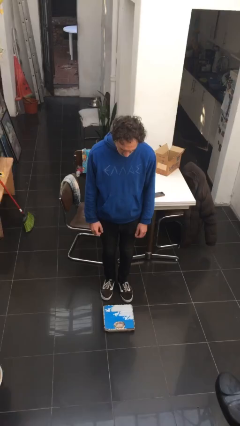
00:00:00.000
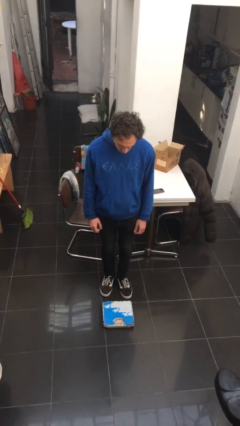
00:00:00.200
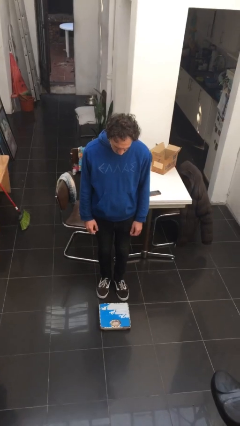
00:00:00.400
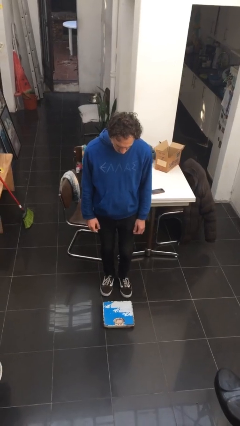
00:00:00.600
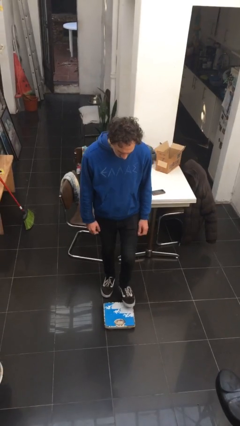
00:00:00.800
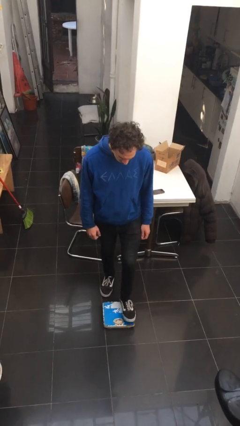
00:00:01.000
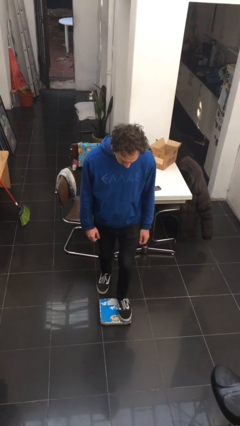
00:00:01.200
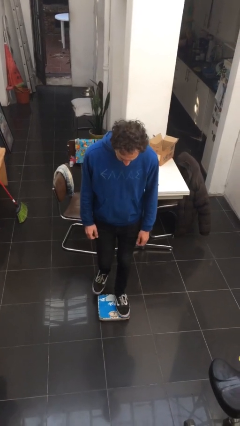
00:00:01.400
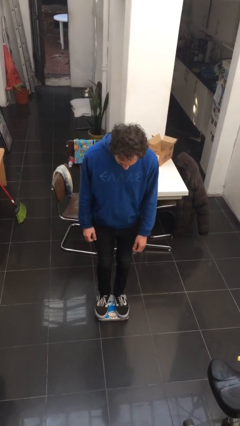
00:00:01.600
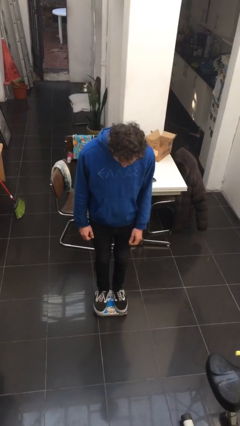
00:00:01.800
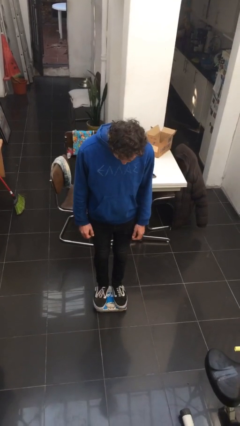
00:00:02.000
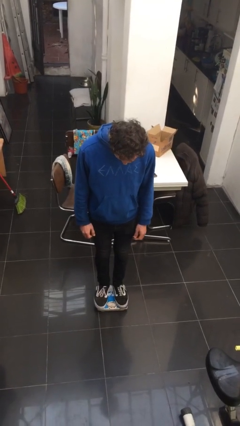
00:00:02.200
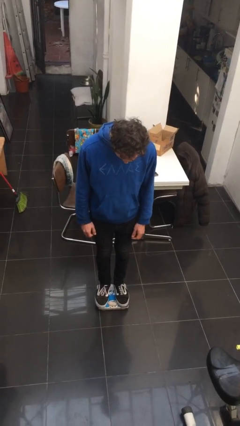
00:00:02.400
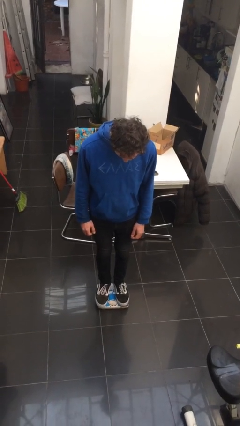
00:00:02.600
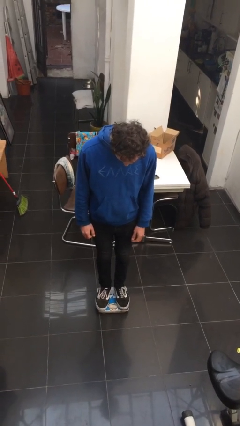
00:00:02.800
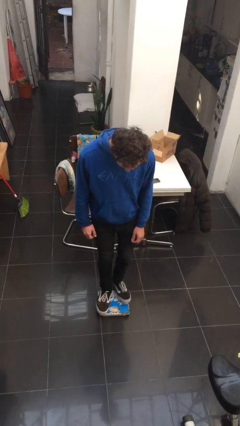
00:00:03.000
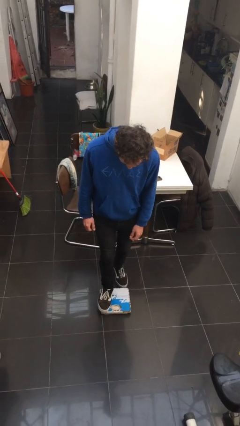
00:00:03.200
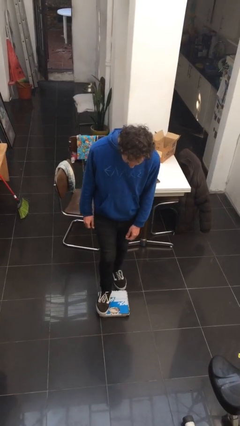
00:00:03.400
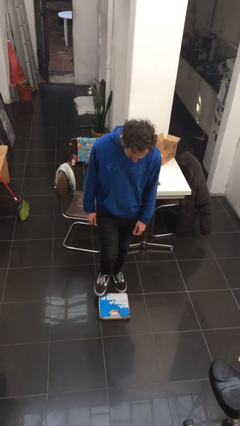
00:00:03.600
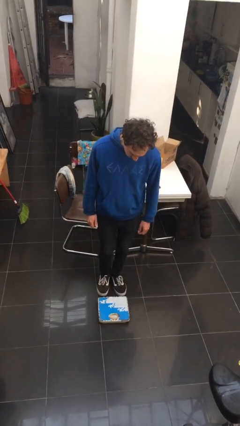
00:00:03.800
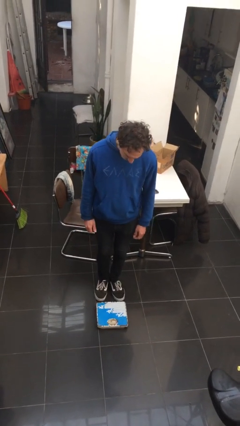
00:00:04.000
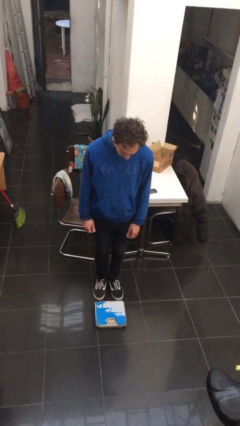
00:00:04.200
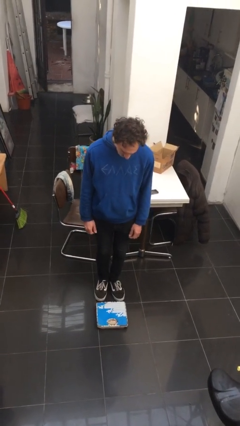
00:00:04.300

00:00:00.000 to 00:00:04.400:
person uses bodyweight scale

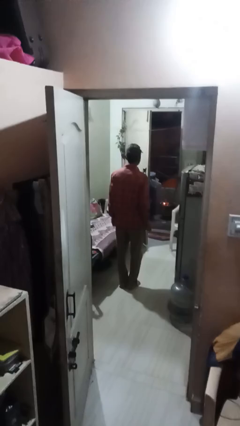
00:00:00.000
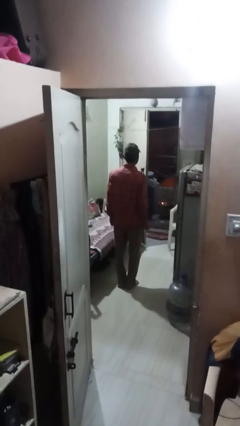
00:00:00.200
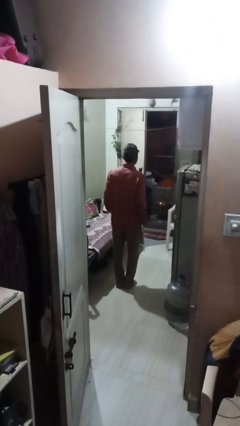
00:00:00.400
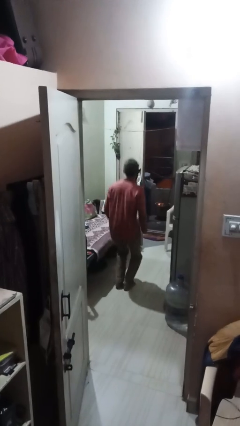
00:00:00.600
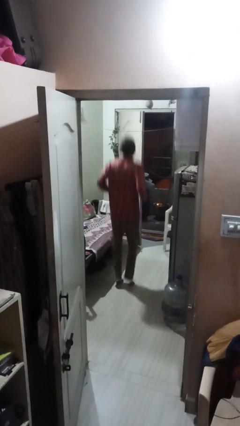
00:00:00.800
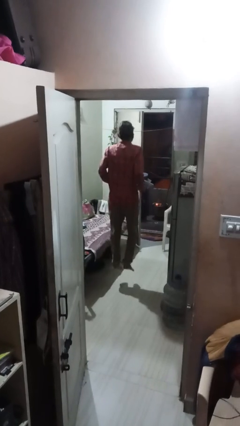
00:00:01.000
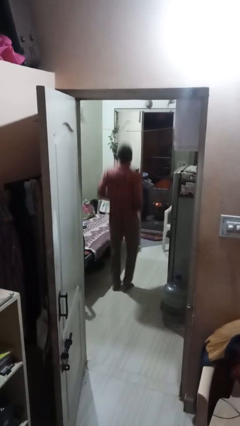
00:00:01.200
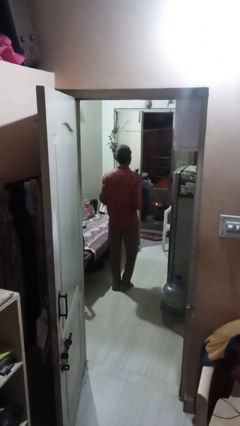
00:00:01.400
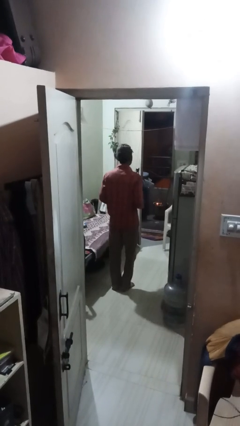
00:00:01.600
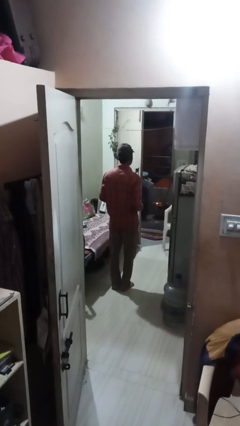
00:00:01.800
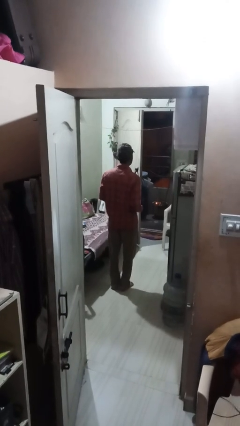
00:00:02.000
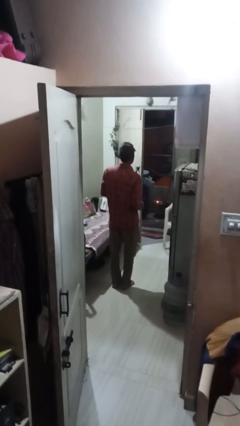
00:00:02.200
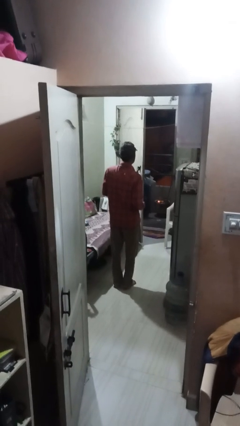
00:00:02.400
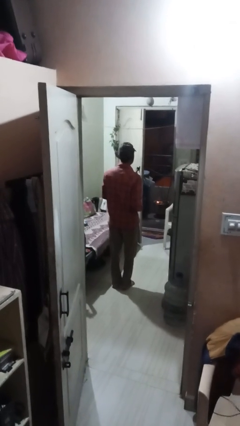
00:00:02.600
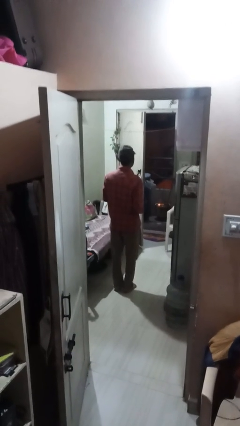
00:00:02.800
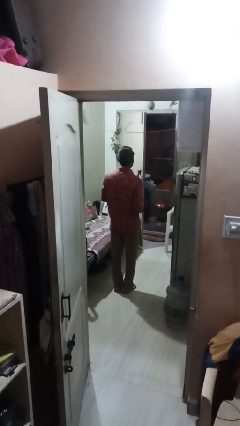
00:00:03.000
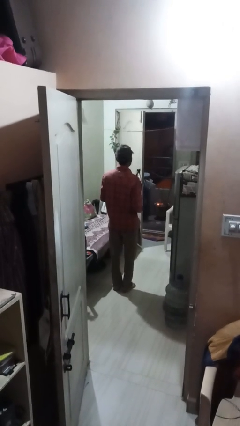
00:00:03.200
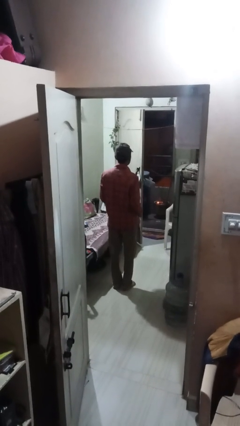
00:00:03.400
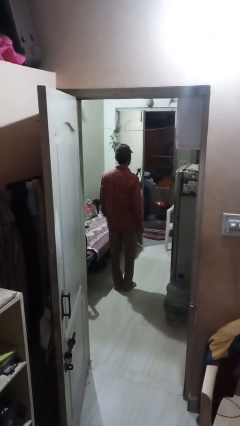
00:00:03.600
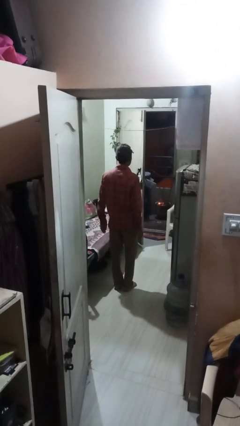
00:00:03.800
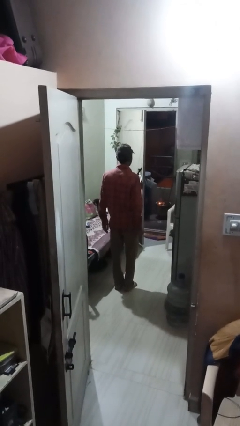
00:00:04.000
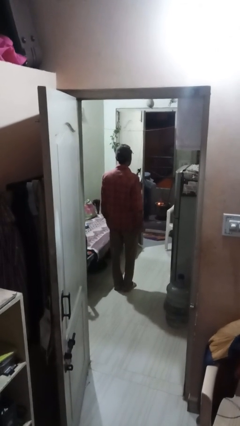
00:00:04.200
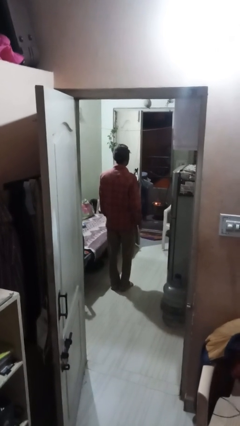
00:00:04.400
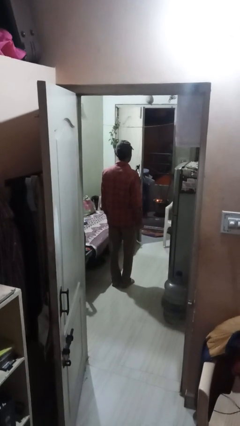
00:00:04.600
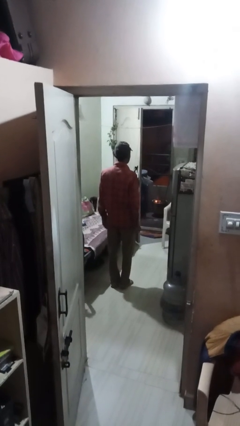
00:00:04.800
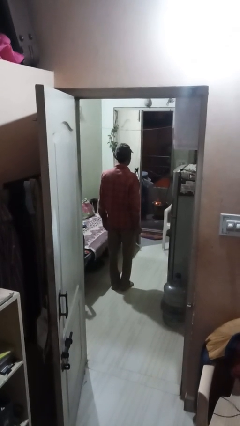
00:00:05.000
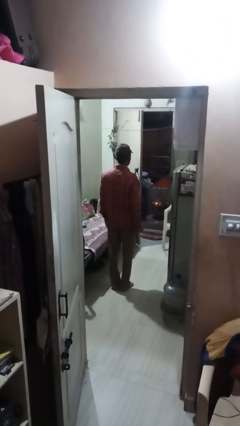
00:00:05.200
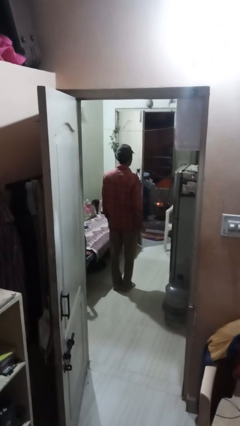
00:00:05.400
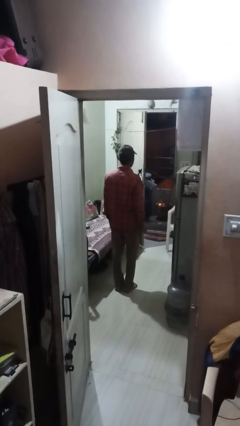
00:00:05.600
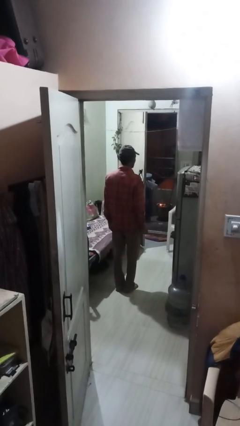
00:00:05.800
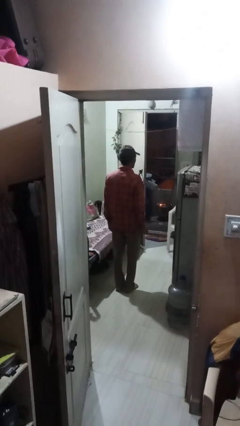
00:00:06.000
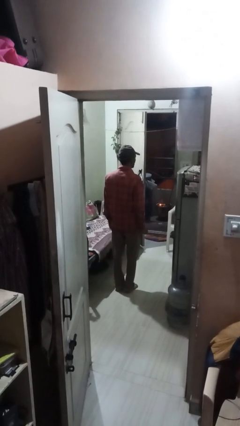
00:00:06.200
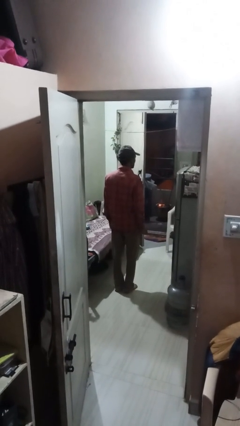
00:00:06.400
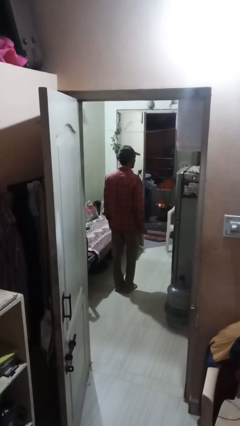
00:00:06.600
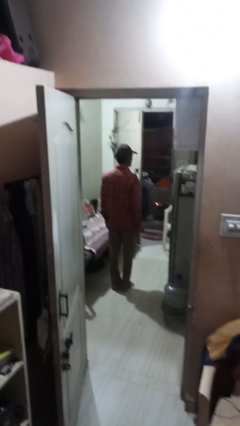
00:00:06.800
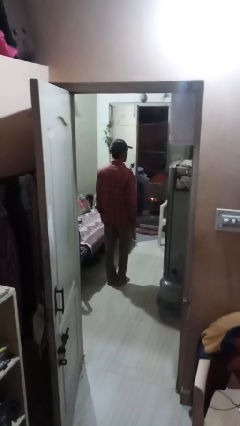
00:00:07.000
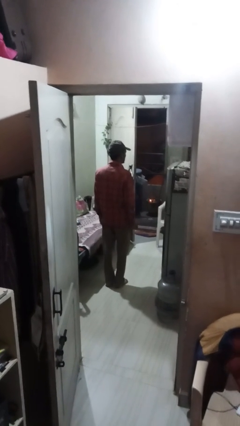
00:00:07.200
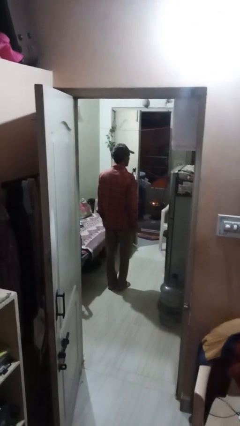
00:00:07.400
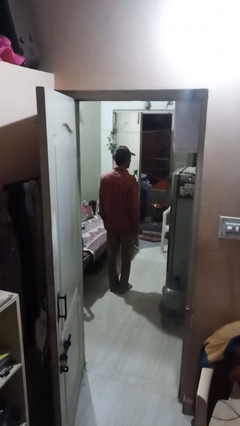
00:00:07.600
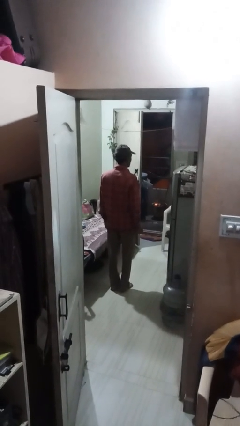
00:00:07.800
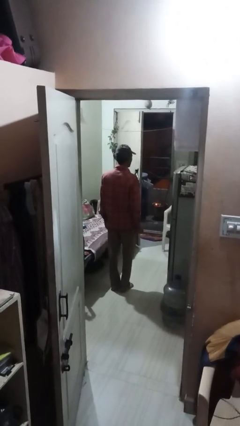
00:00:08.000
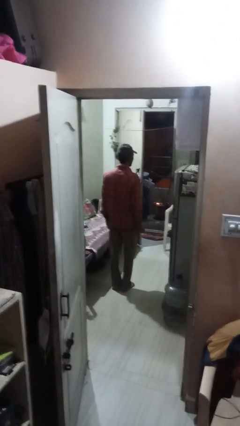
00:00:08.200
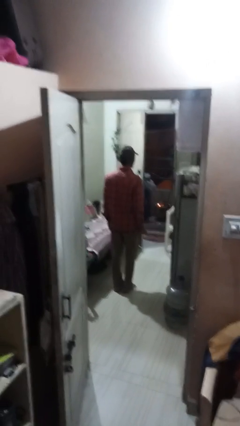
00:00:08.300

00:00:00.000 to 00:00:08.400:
person jumps

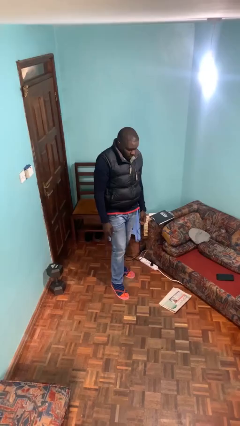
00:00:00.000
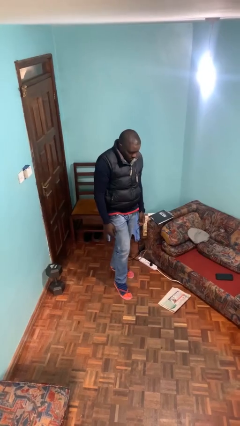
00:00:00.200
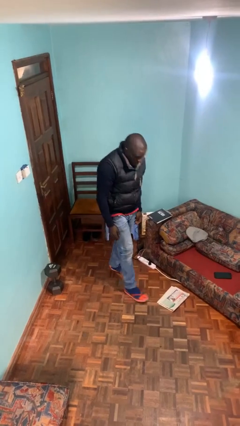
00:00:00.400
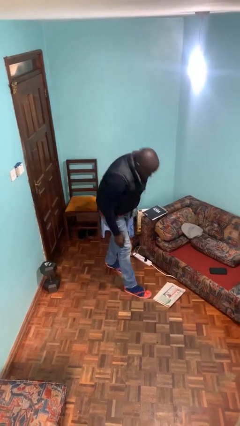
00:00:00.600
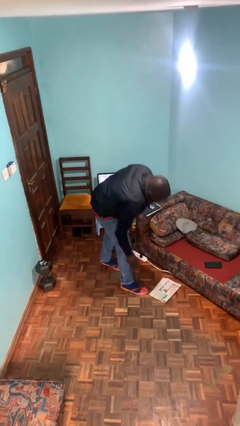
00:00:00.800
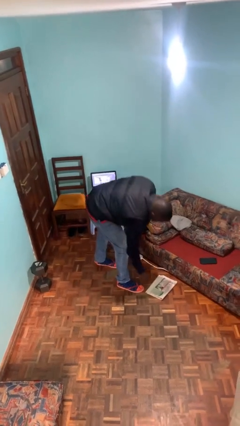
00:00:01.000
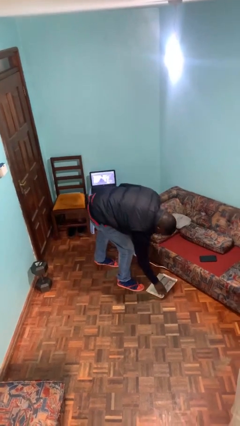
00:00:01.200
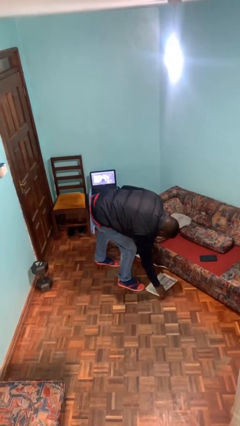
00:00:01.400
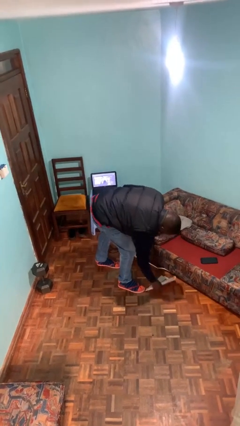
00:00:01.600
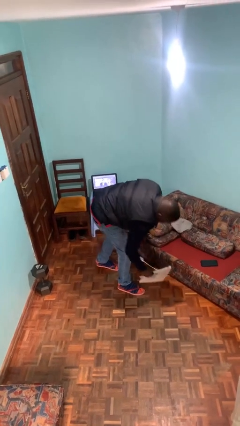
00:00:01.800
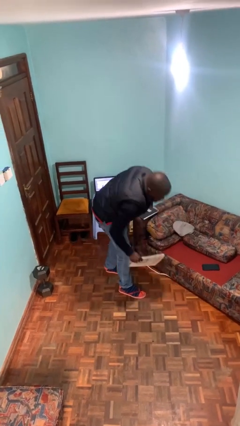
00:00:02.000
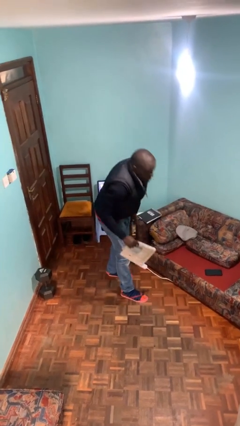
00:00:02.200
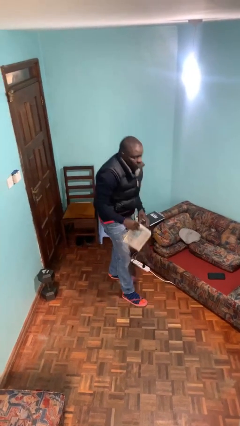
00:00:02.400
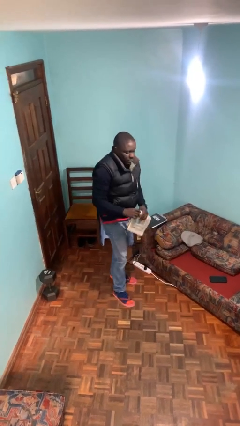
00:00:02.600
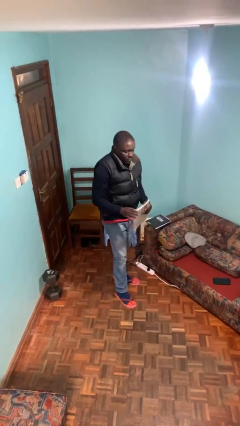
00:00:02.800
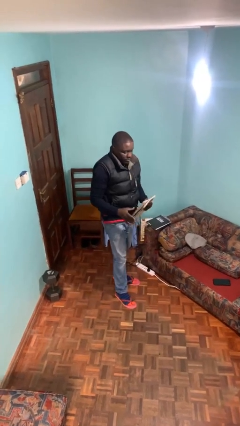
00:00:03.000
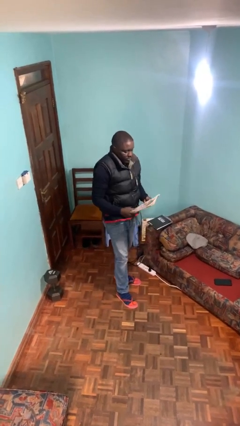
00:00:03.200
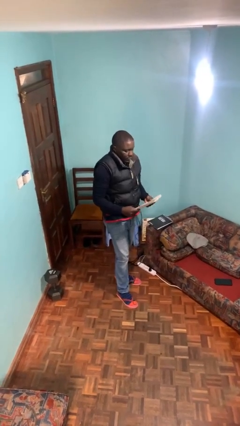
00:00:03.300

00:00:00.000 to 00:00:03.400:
person picks up object from floor

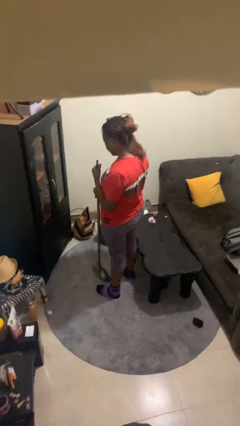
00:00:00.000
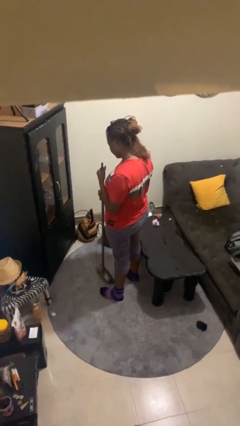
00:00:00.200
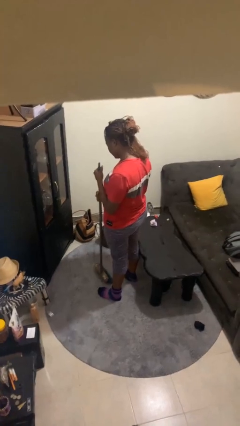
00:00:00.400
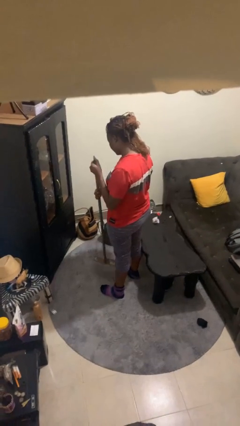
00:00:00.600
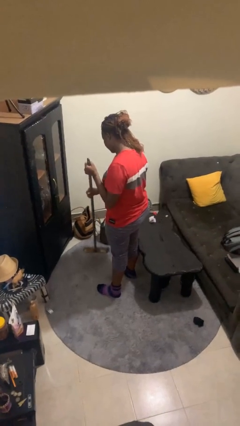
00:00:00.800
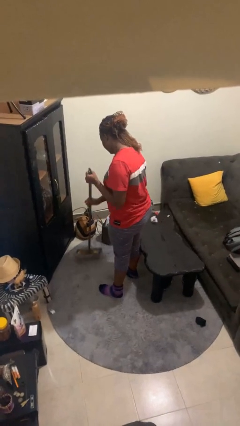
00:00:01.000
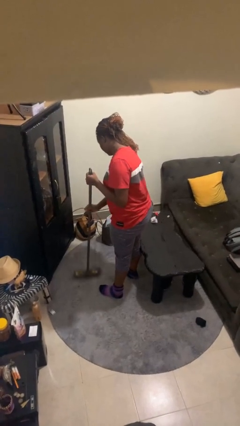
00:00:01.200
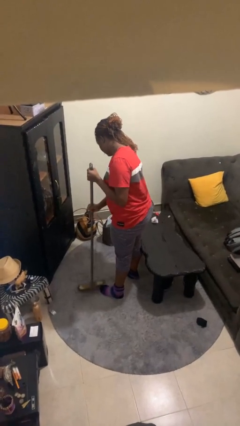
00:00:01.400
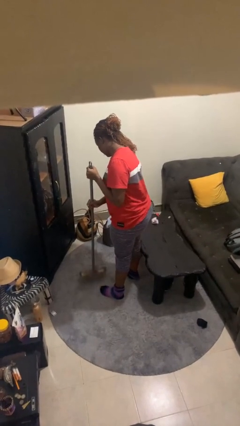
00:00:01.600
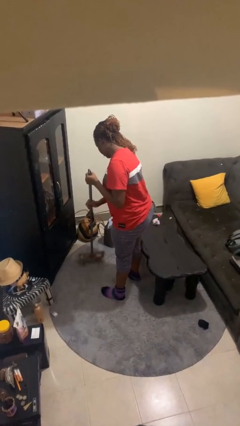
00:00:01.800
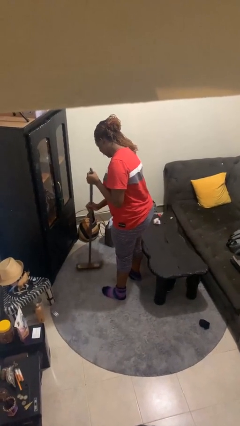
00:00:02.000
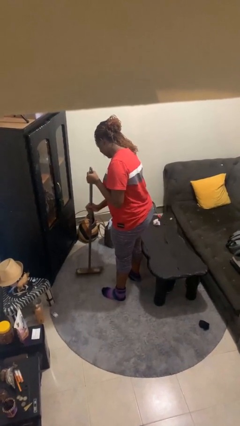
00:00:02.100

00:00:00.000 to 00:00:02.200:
person sweeps floor
